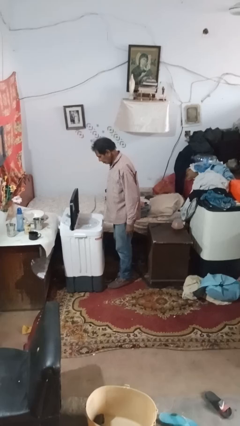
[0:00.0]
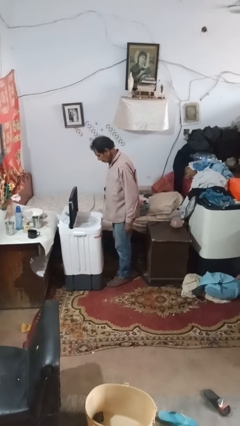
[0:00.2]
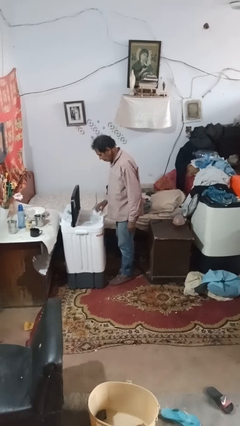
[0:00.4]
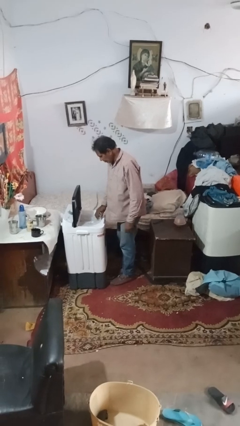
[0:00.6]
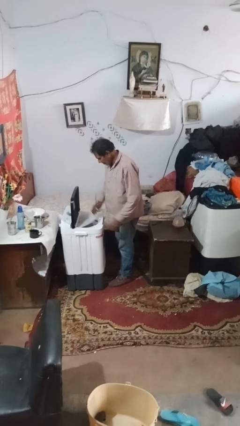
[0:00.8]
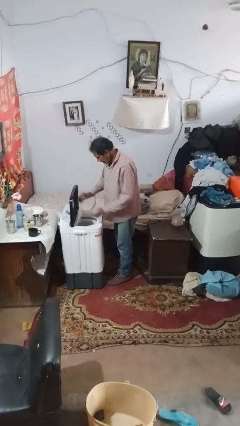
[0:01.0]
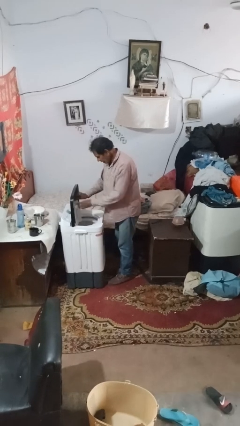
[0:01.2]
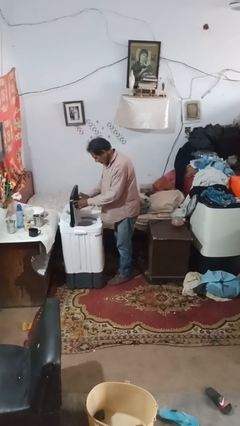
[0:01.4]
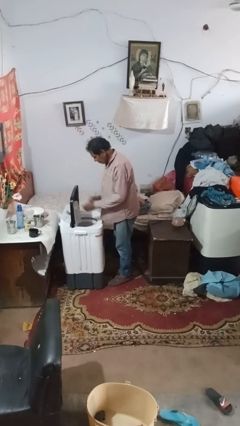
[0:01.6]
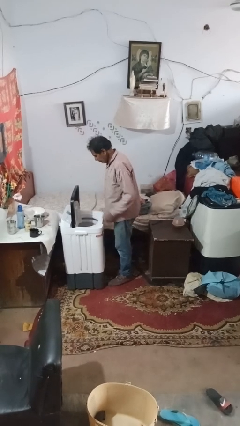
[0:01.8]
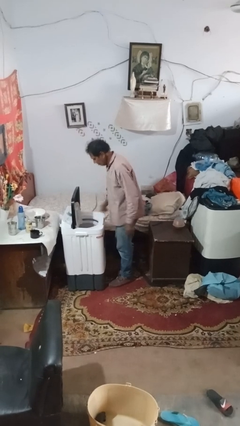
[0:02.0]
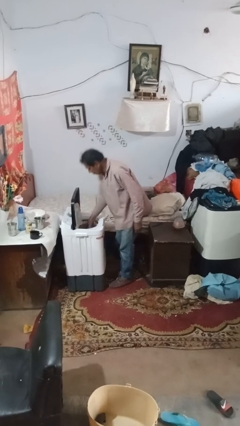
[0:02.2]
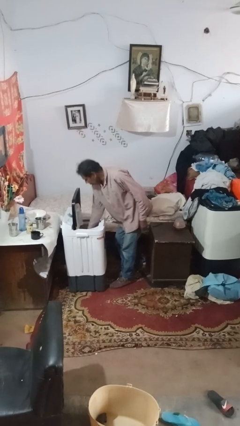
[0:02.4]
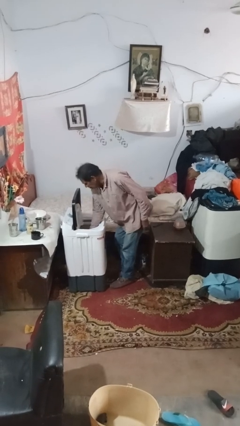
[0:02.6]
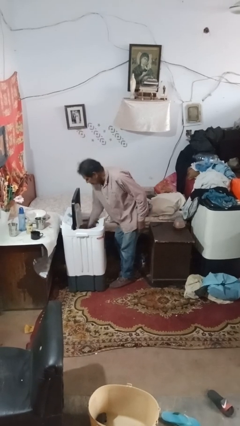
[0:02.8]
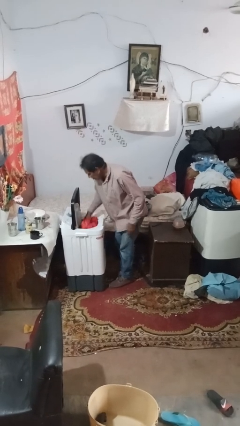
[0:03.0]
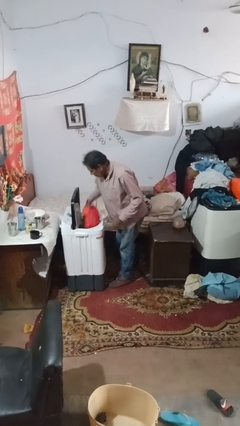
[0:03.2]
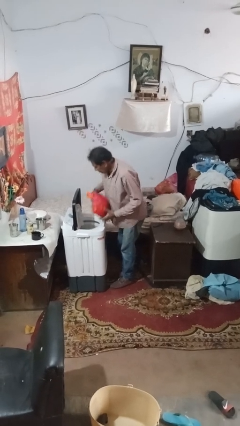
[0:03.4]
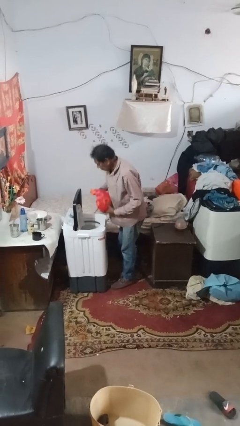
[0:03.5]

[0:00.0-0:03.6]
person unloads dryer

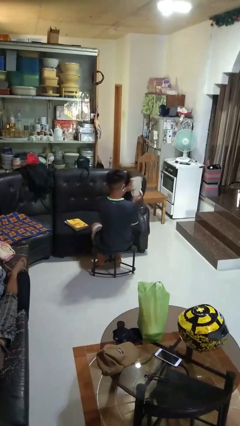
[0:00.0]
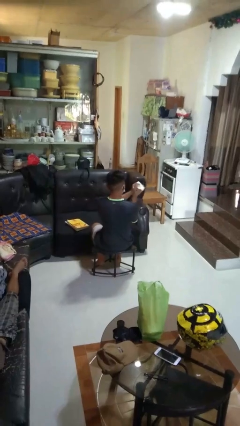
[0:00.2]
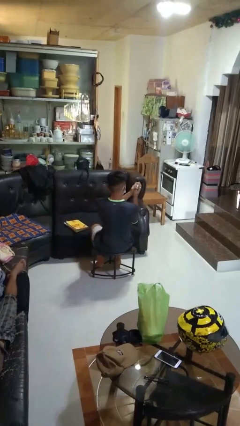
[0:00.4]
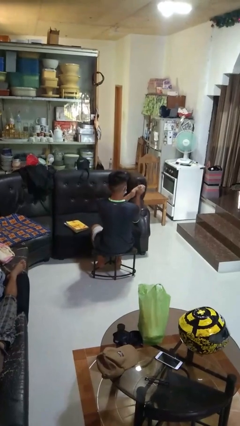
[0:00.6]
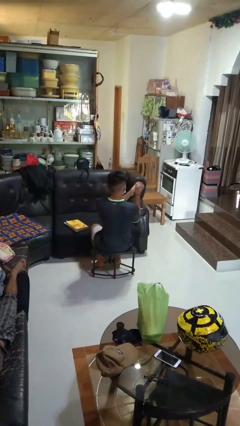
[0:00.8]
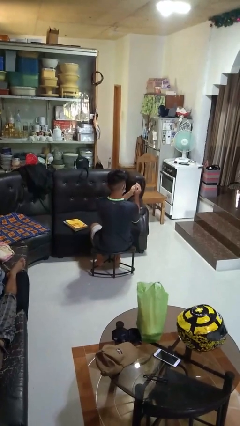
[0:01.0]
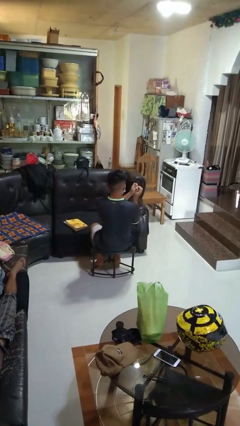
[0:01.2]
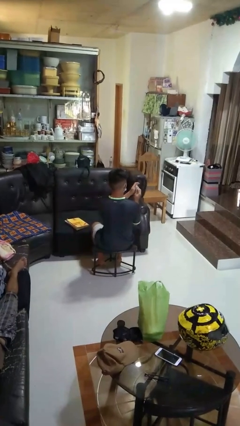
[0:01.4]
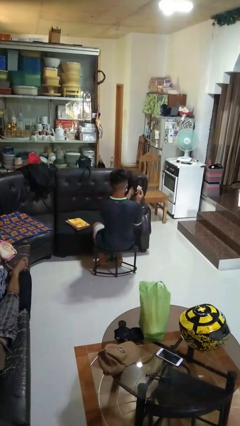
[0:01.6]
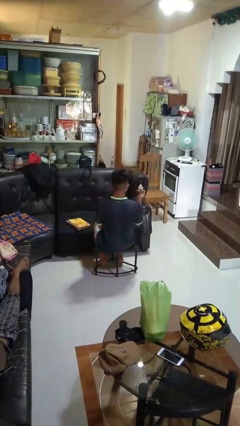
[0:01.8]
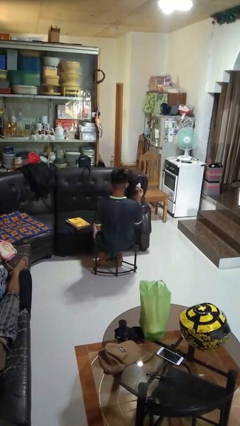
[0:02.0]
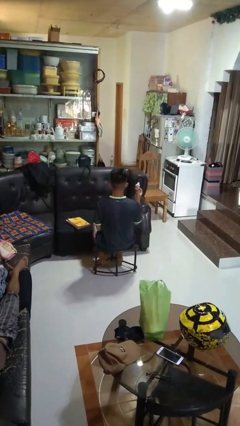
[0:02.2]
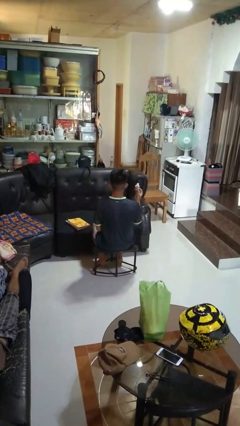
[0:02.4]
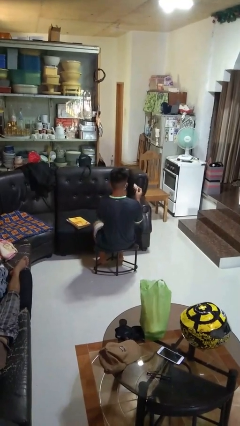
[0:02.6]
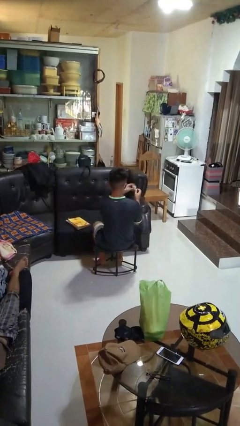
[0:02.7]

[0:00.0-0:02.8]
person crumples paper

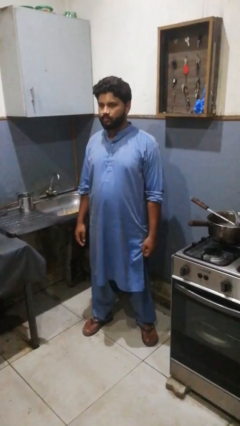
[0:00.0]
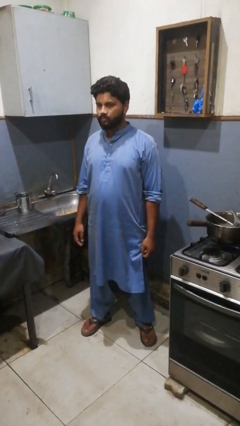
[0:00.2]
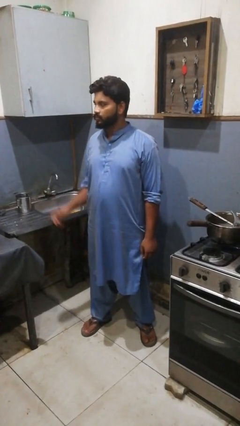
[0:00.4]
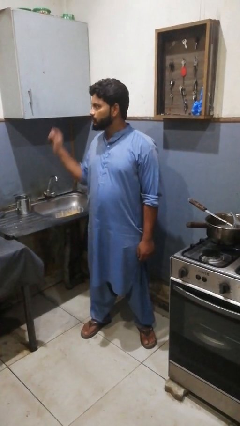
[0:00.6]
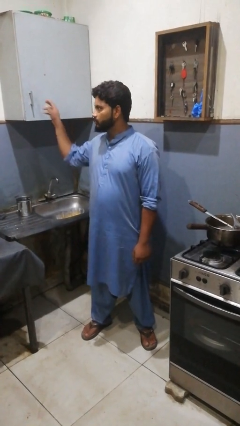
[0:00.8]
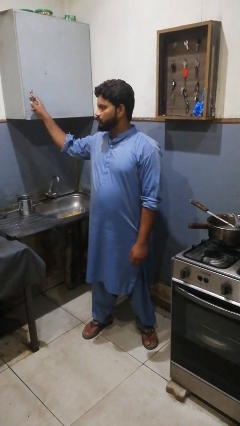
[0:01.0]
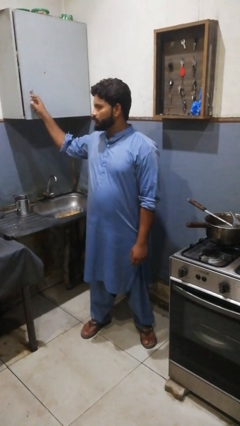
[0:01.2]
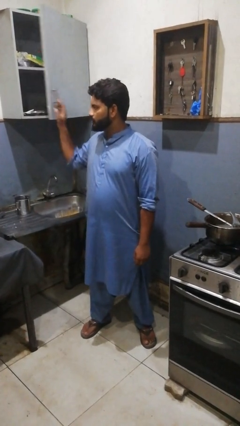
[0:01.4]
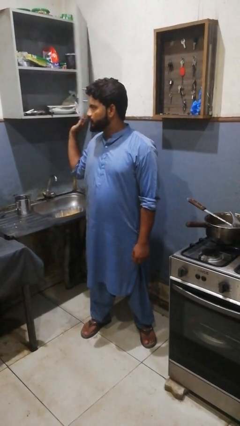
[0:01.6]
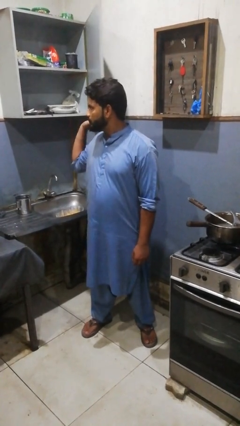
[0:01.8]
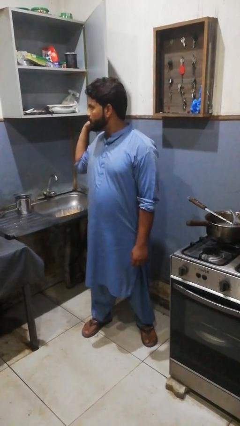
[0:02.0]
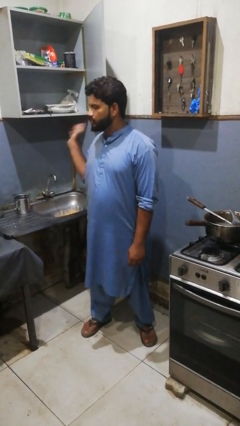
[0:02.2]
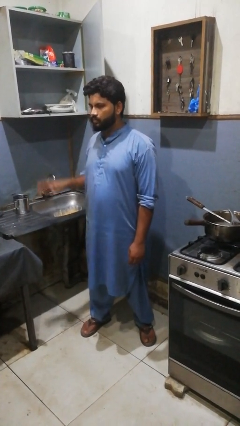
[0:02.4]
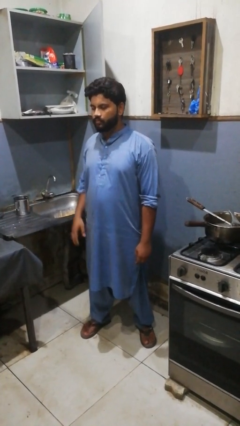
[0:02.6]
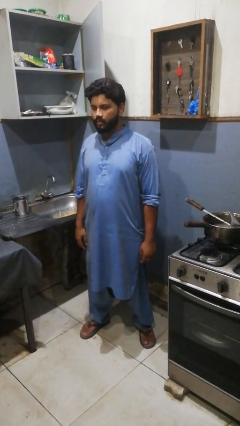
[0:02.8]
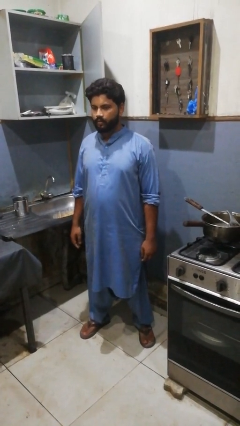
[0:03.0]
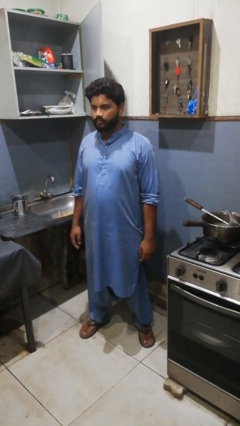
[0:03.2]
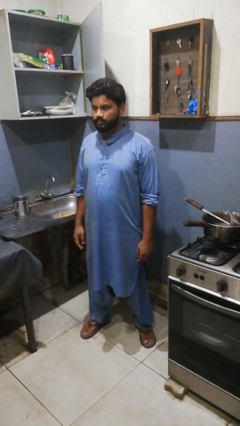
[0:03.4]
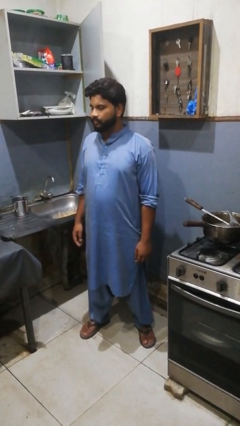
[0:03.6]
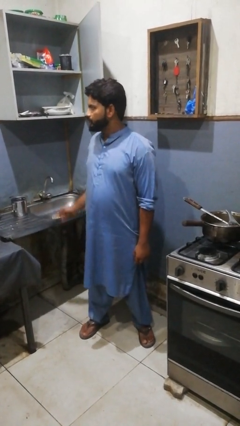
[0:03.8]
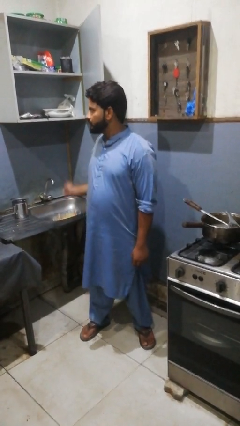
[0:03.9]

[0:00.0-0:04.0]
person opens kitchen drawer

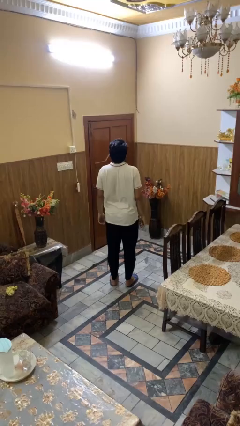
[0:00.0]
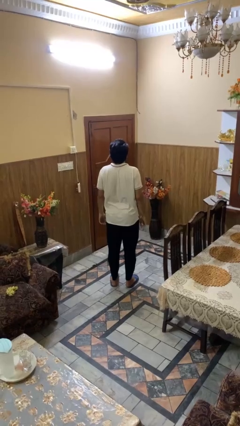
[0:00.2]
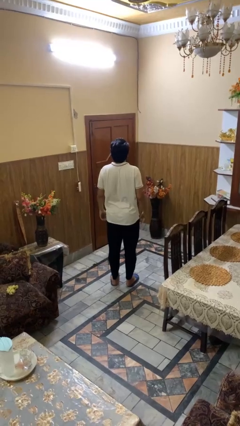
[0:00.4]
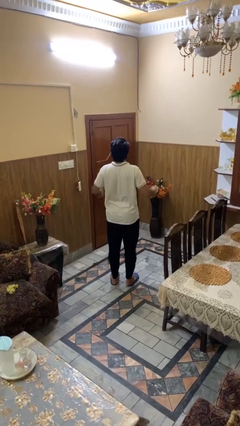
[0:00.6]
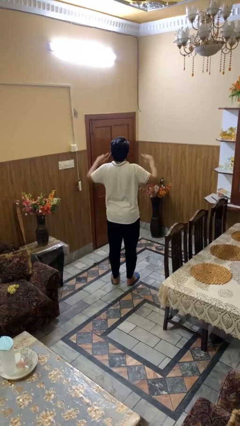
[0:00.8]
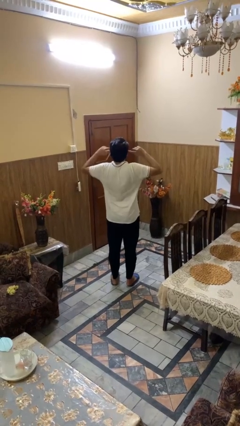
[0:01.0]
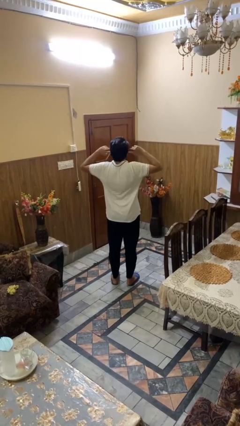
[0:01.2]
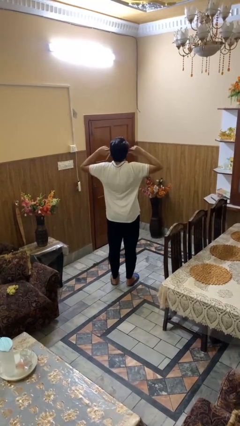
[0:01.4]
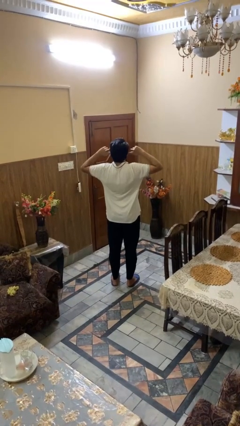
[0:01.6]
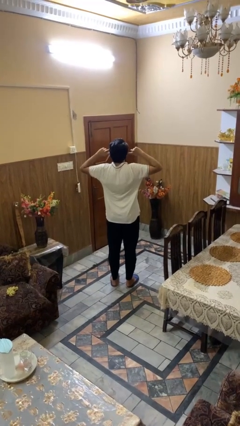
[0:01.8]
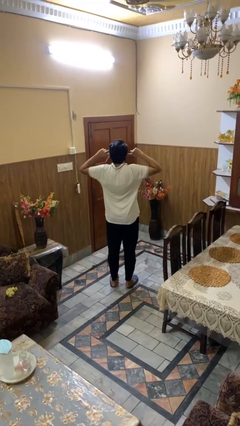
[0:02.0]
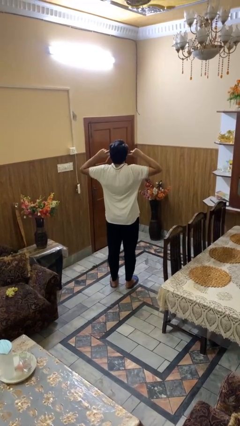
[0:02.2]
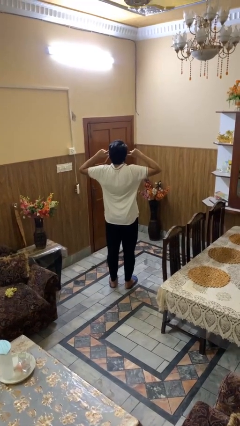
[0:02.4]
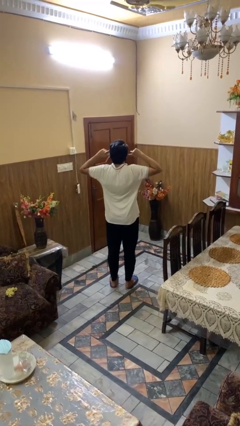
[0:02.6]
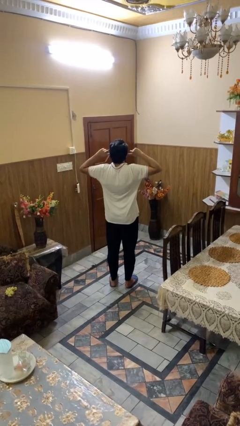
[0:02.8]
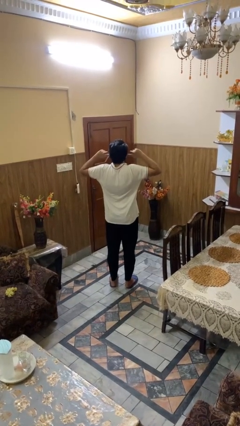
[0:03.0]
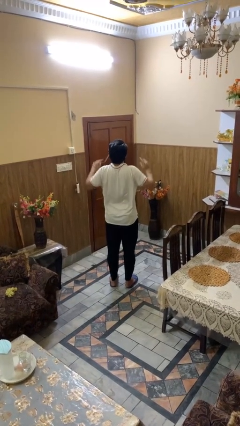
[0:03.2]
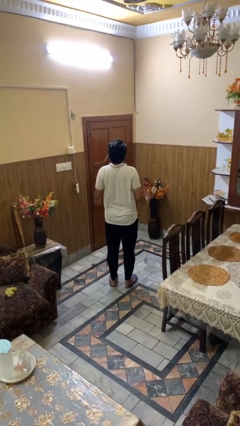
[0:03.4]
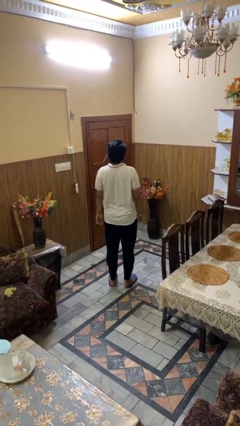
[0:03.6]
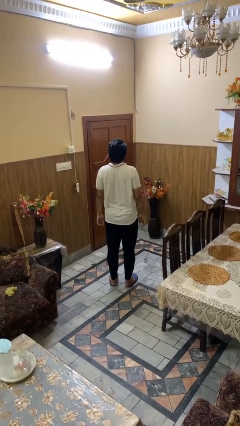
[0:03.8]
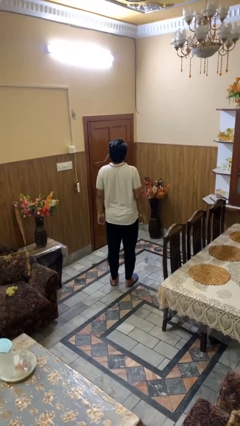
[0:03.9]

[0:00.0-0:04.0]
person puts fingers in ear

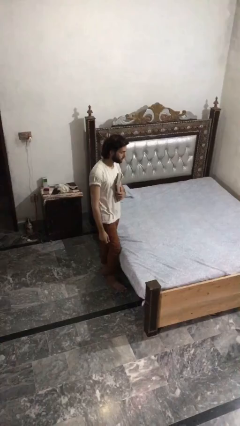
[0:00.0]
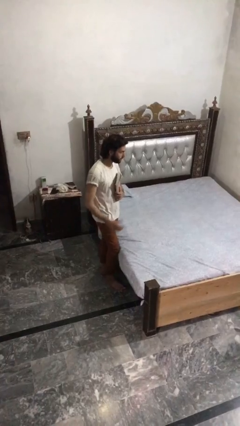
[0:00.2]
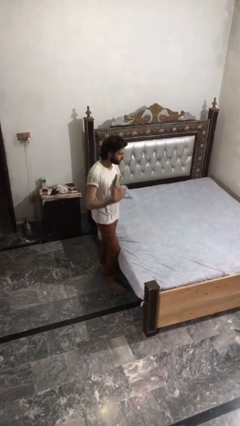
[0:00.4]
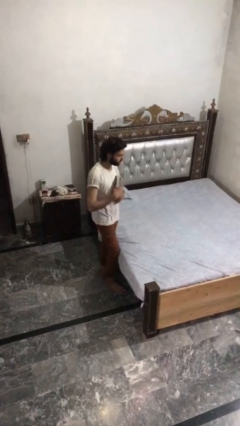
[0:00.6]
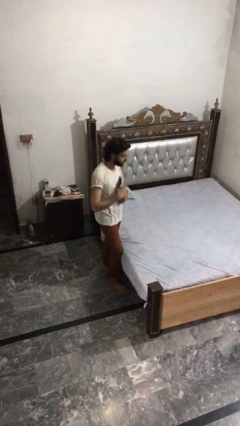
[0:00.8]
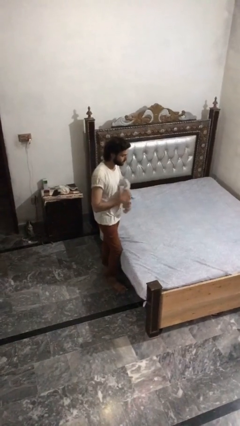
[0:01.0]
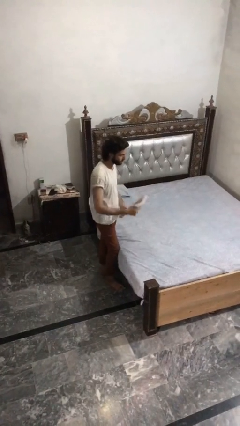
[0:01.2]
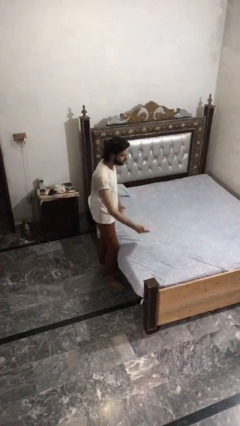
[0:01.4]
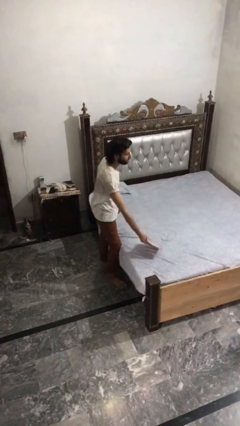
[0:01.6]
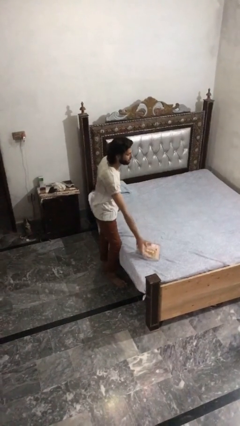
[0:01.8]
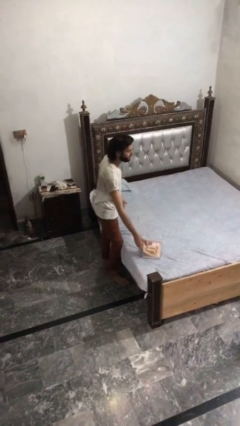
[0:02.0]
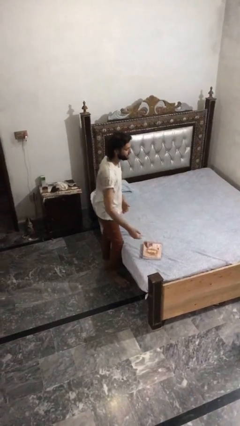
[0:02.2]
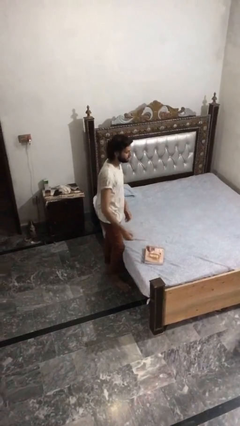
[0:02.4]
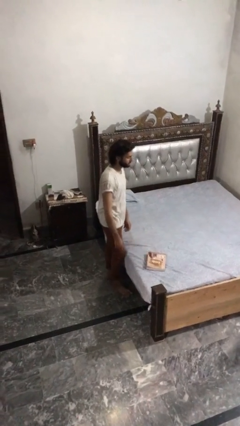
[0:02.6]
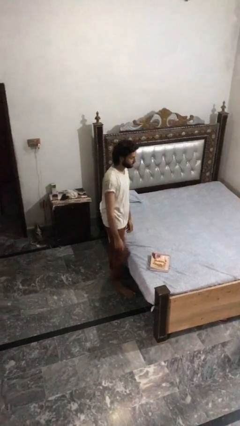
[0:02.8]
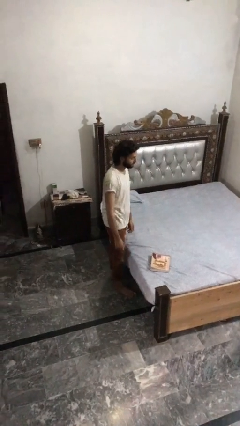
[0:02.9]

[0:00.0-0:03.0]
person puts down object on bed
